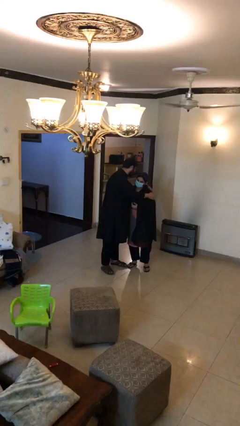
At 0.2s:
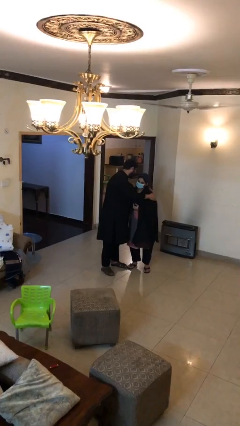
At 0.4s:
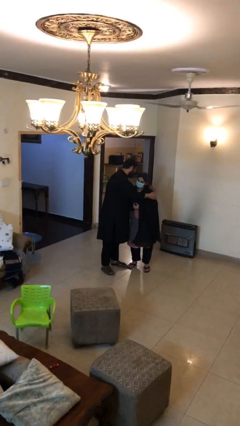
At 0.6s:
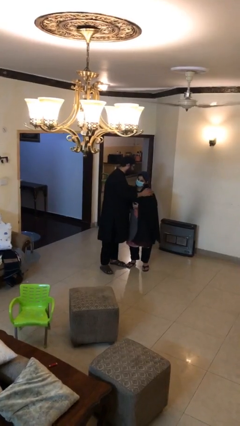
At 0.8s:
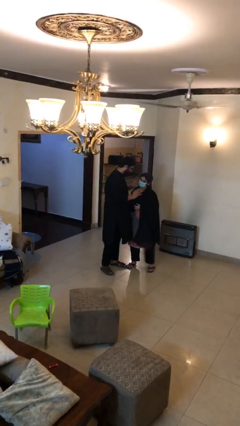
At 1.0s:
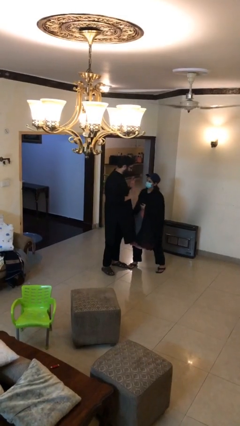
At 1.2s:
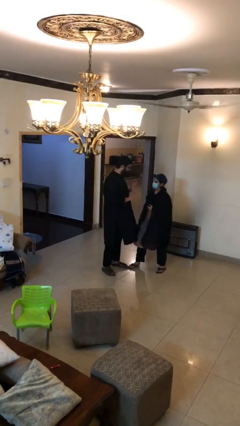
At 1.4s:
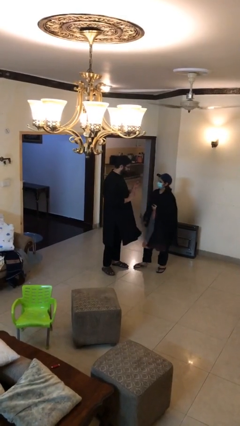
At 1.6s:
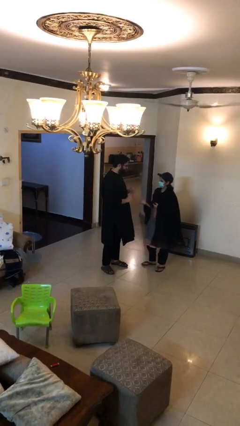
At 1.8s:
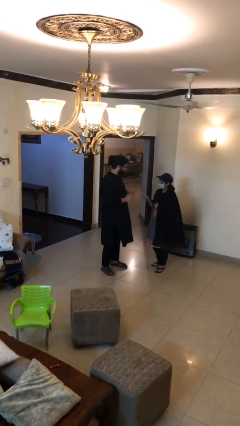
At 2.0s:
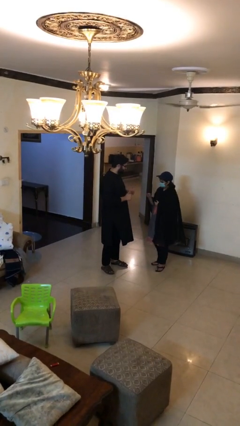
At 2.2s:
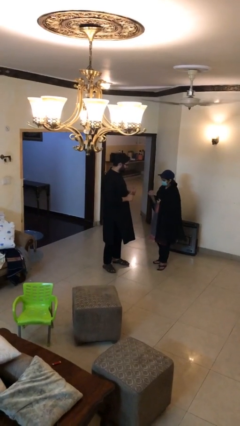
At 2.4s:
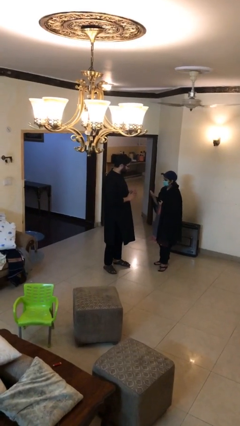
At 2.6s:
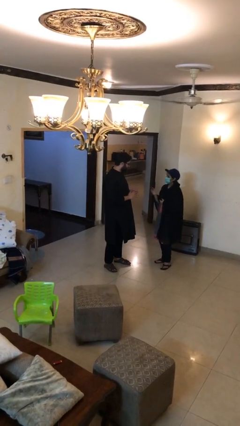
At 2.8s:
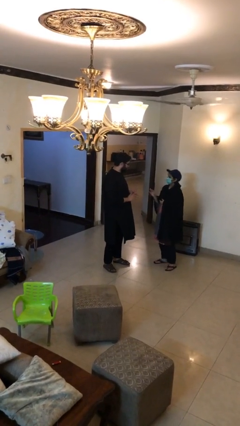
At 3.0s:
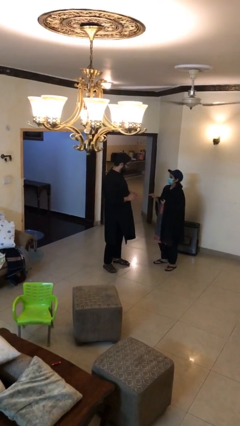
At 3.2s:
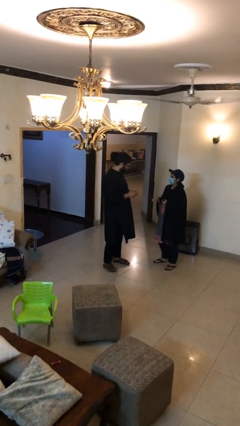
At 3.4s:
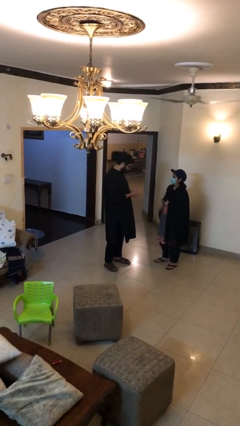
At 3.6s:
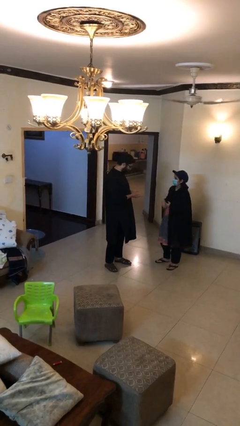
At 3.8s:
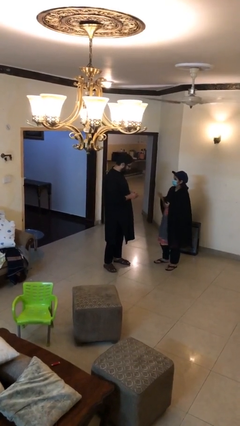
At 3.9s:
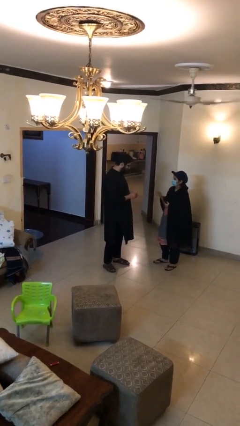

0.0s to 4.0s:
person talks to person

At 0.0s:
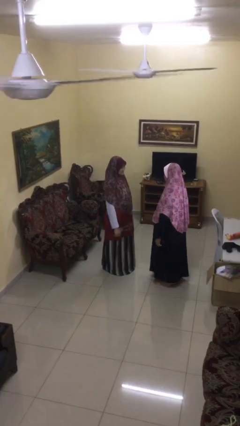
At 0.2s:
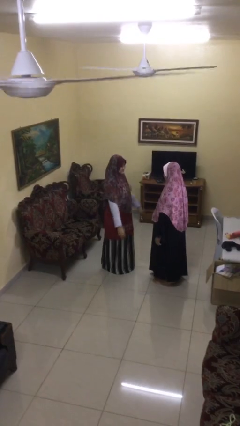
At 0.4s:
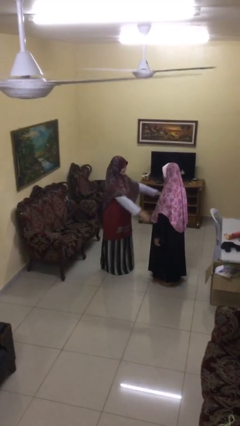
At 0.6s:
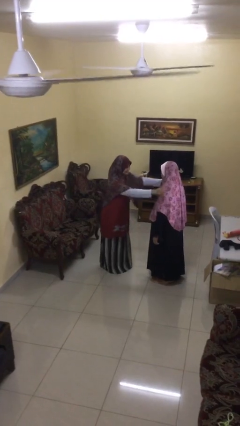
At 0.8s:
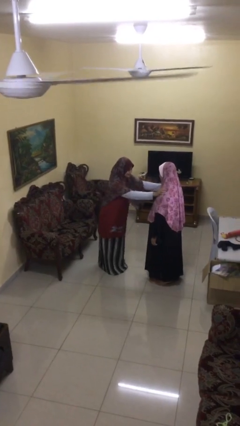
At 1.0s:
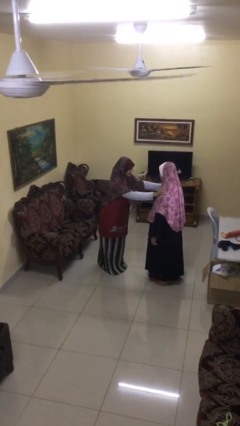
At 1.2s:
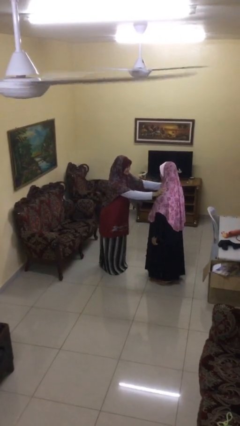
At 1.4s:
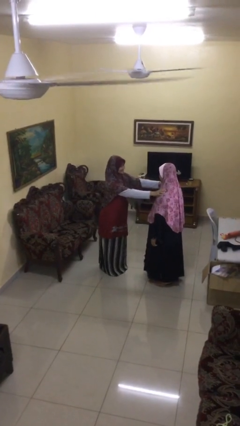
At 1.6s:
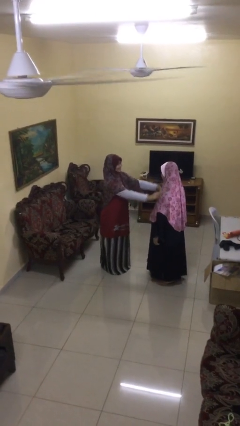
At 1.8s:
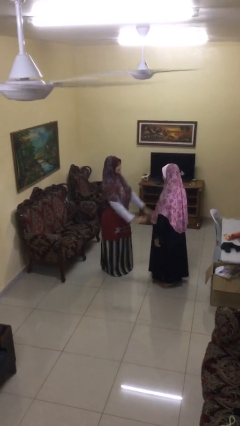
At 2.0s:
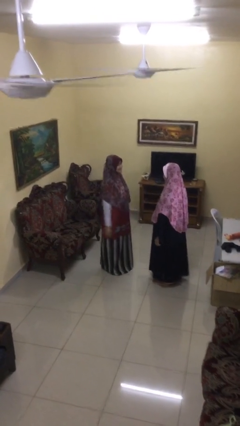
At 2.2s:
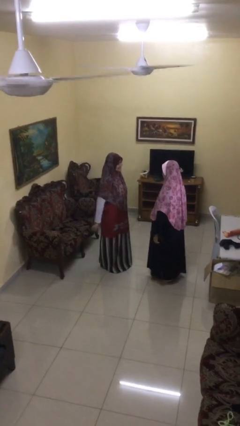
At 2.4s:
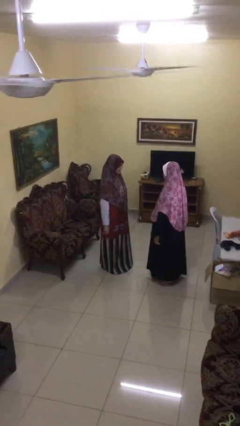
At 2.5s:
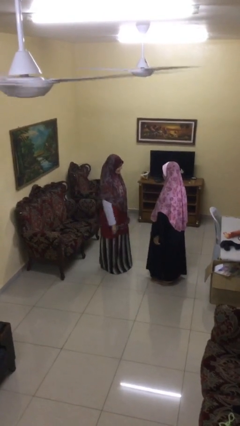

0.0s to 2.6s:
person pounds shoulders of person

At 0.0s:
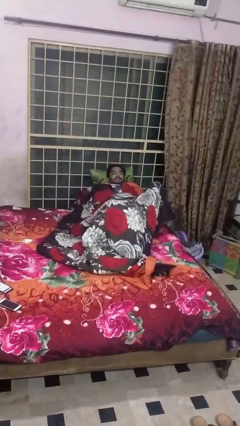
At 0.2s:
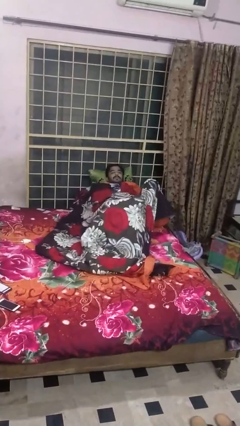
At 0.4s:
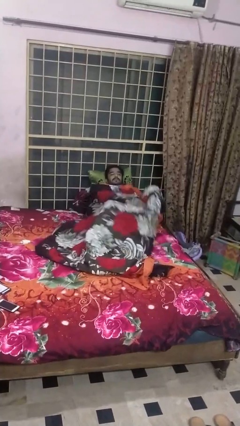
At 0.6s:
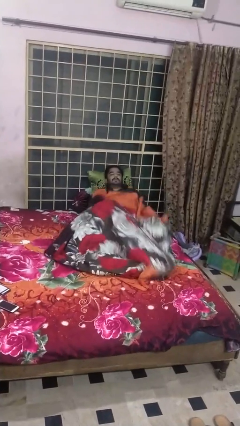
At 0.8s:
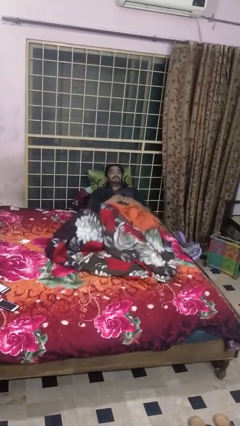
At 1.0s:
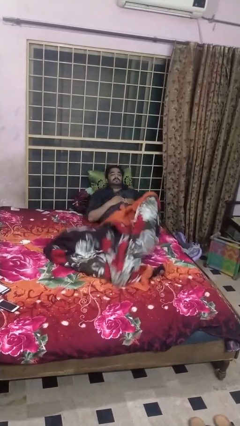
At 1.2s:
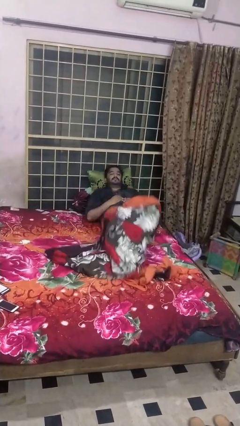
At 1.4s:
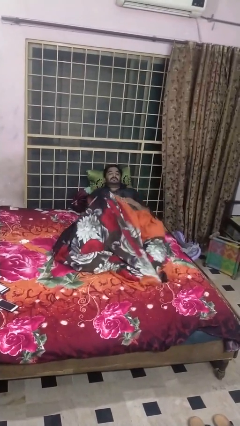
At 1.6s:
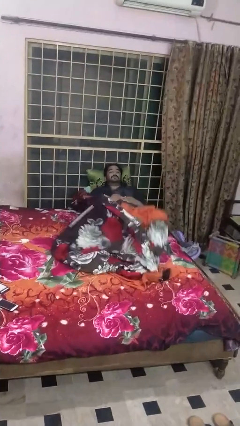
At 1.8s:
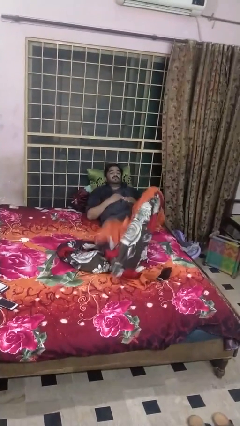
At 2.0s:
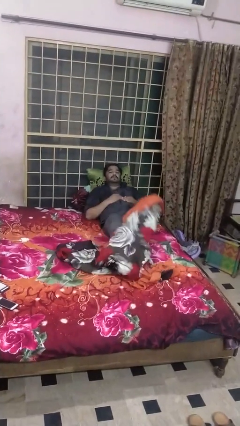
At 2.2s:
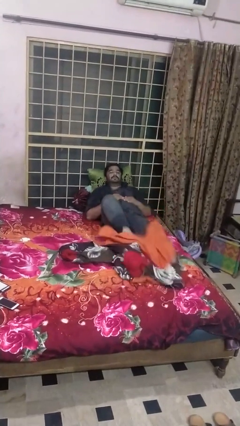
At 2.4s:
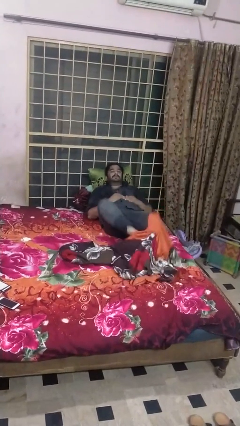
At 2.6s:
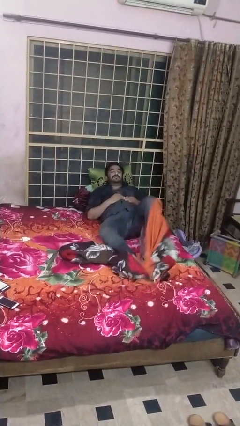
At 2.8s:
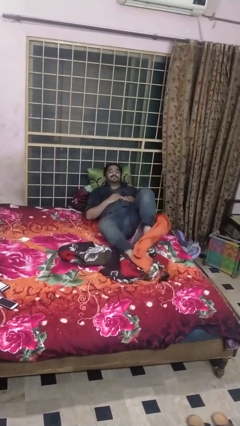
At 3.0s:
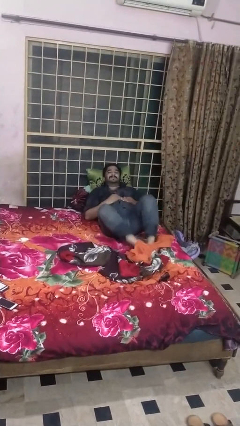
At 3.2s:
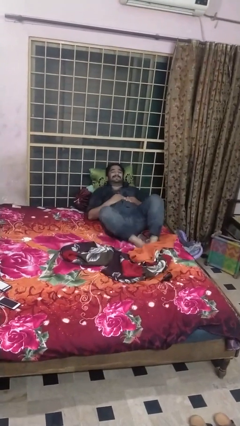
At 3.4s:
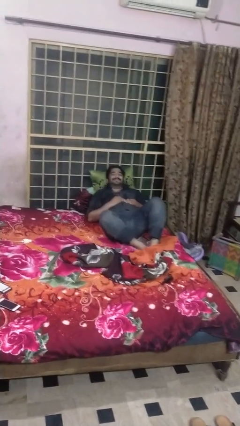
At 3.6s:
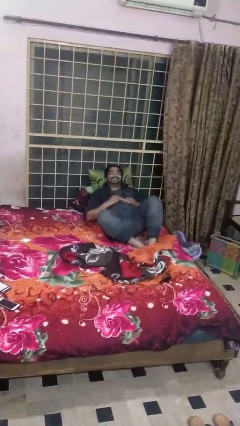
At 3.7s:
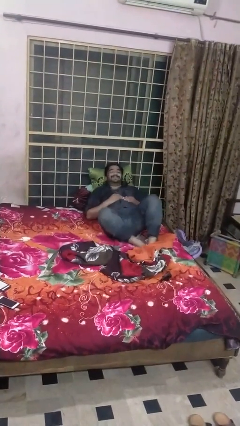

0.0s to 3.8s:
person uncovers with bedsheets

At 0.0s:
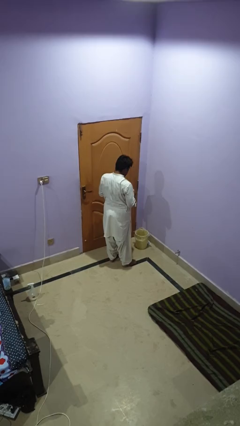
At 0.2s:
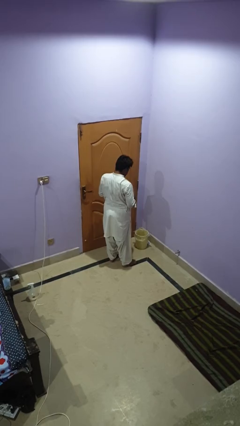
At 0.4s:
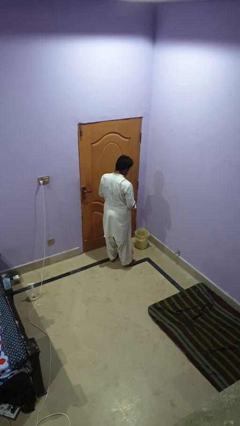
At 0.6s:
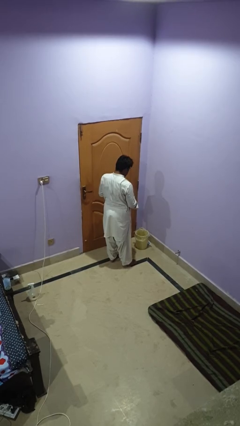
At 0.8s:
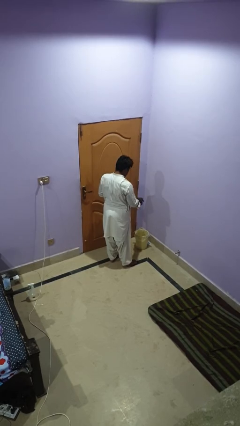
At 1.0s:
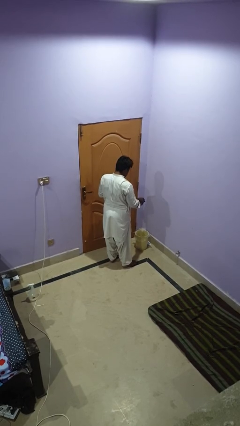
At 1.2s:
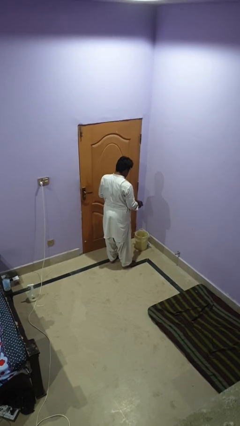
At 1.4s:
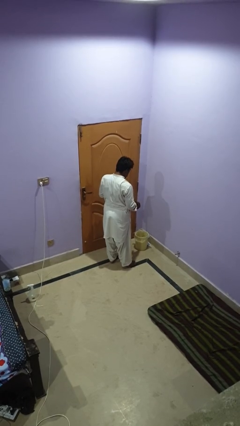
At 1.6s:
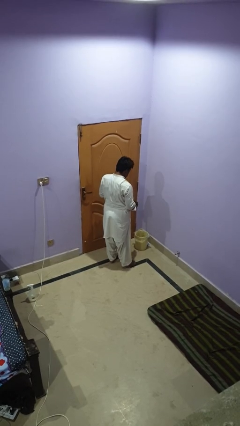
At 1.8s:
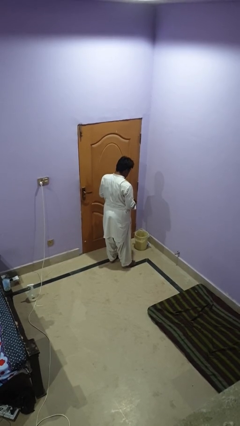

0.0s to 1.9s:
person discards trash

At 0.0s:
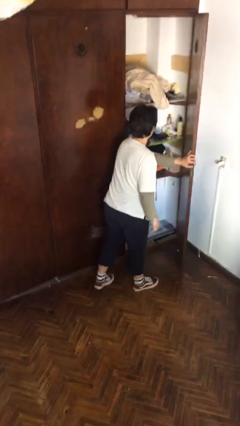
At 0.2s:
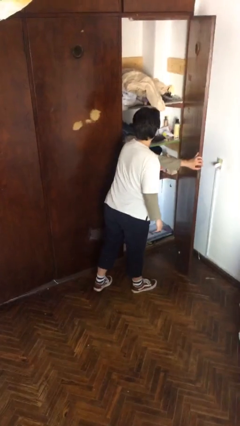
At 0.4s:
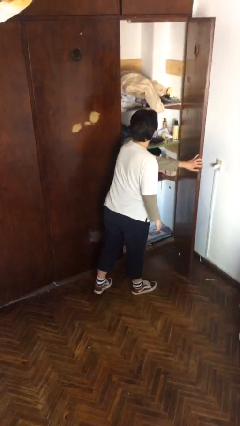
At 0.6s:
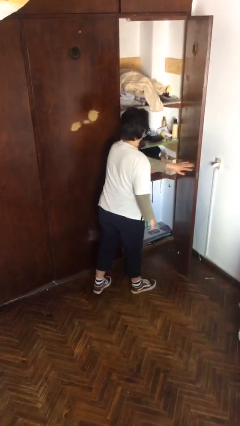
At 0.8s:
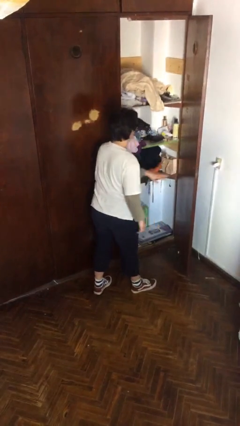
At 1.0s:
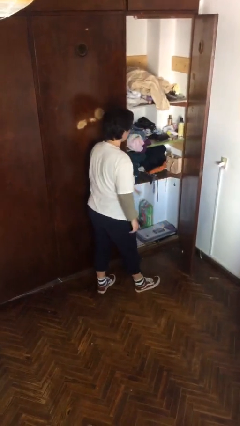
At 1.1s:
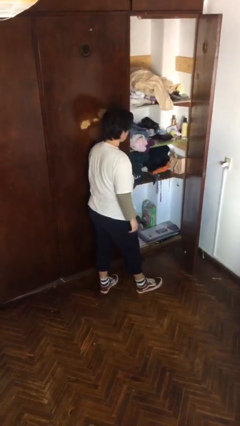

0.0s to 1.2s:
person opens closet door

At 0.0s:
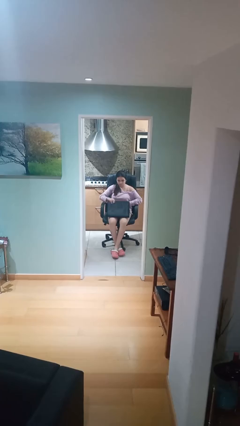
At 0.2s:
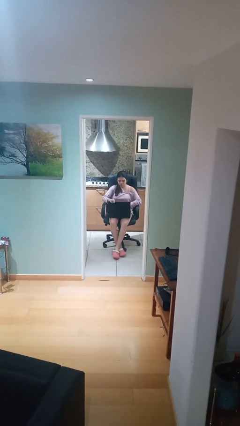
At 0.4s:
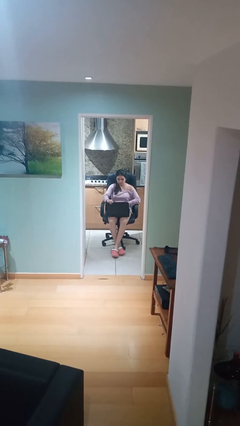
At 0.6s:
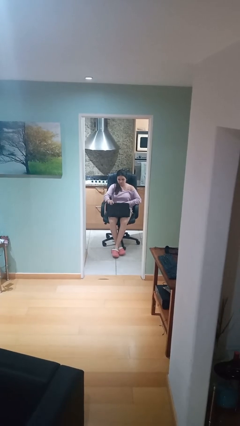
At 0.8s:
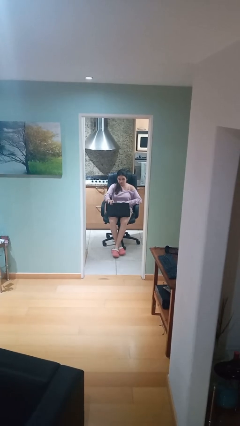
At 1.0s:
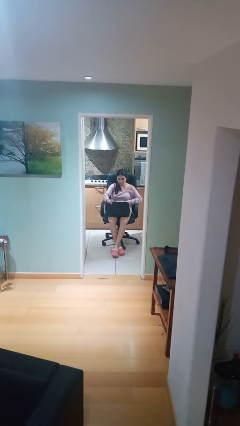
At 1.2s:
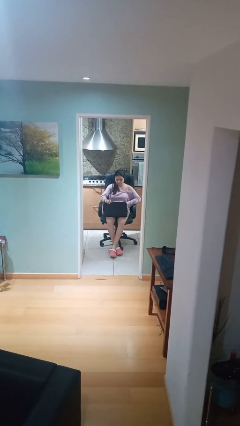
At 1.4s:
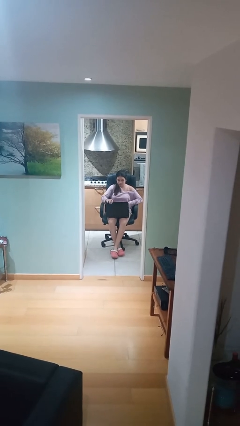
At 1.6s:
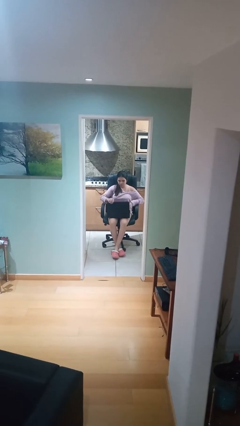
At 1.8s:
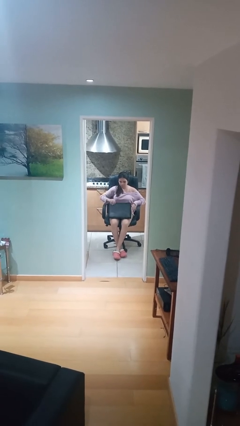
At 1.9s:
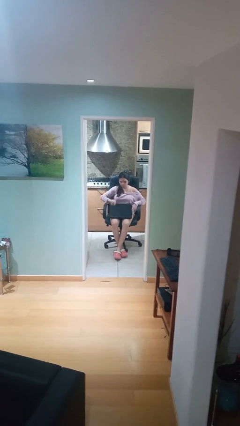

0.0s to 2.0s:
person interacts with laptop

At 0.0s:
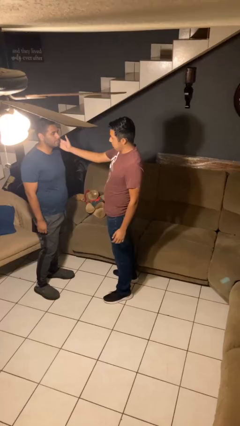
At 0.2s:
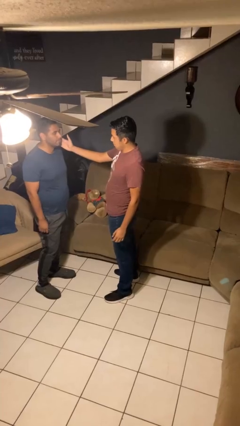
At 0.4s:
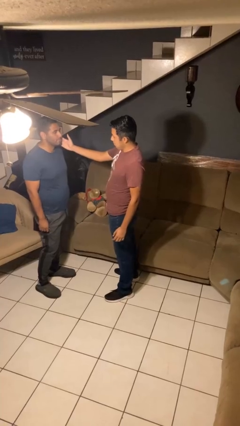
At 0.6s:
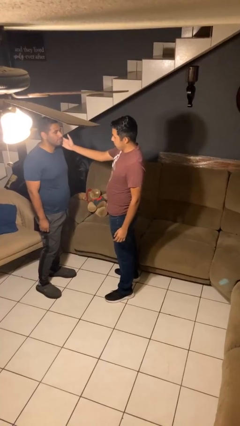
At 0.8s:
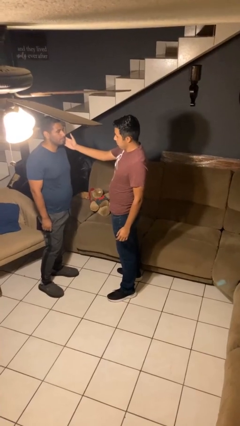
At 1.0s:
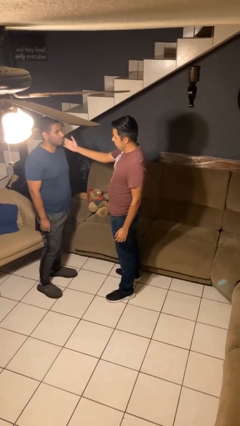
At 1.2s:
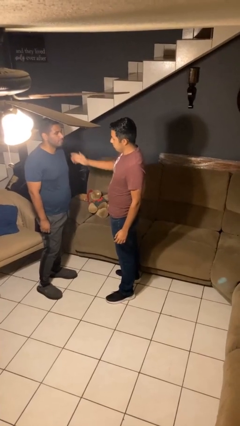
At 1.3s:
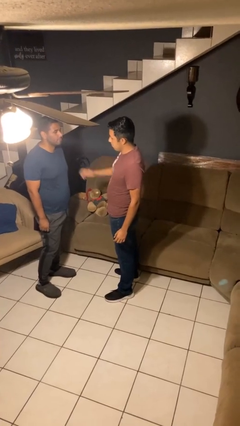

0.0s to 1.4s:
person touches face of person

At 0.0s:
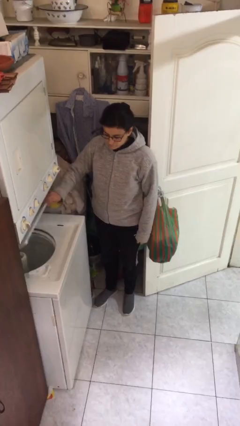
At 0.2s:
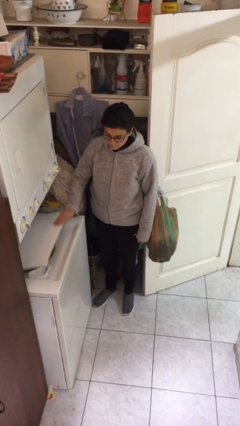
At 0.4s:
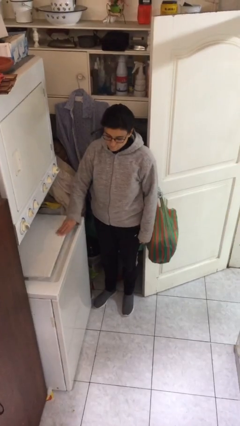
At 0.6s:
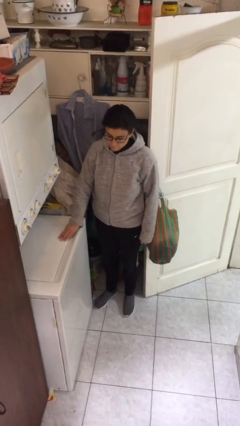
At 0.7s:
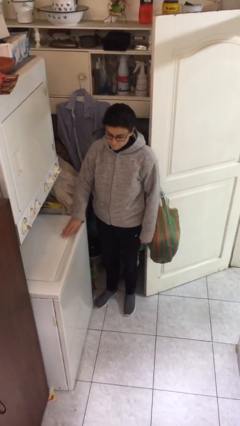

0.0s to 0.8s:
person closes clothes washer
